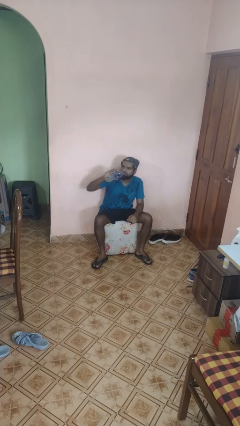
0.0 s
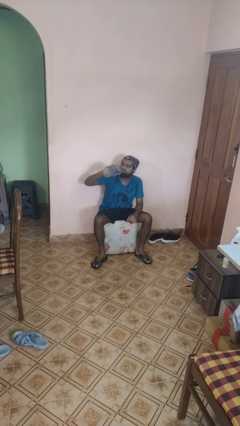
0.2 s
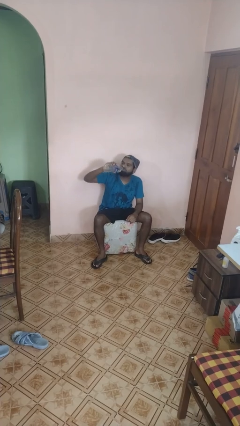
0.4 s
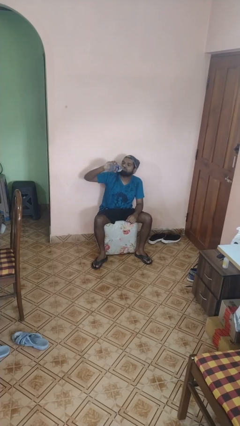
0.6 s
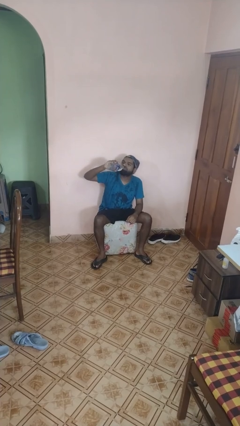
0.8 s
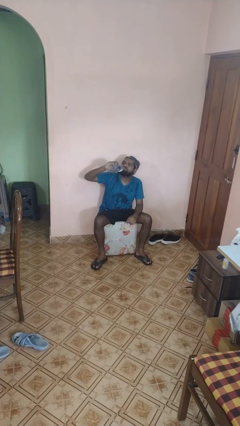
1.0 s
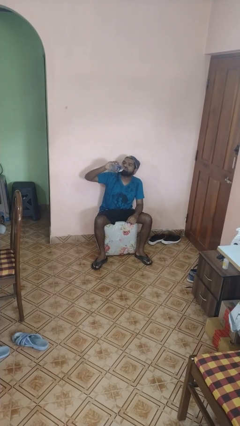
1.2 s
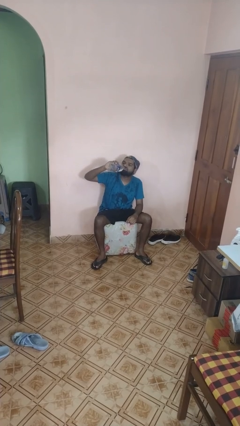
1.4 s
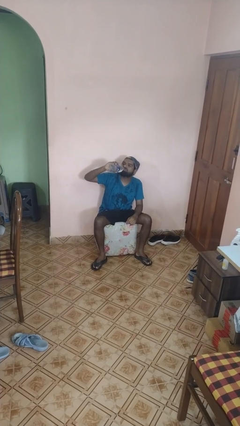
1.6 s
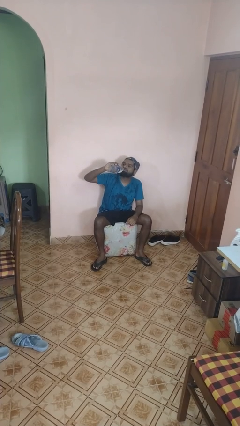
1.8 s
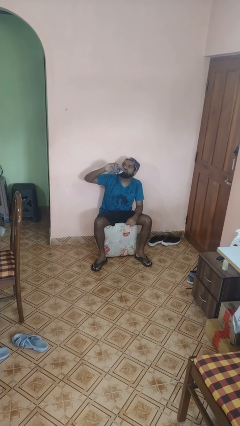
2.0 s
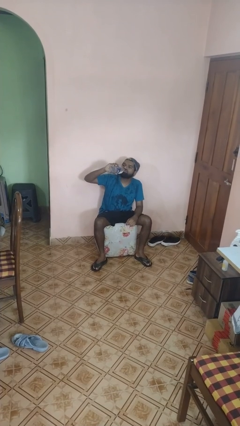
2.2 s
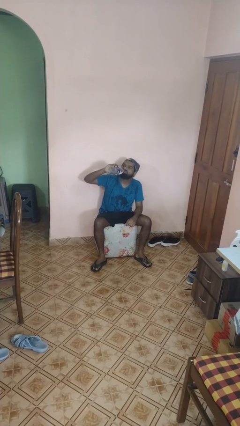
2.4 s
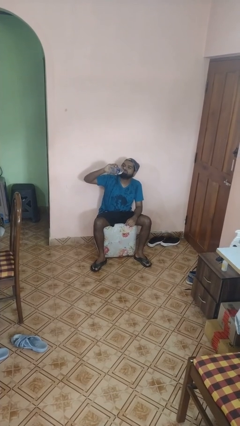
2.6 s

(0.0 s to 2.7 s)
person drinks from bottle

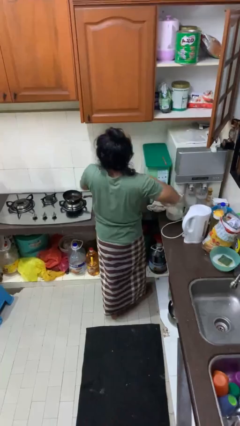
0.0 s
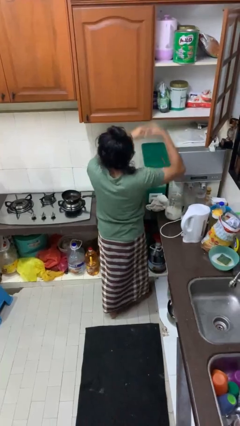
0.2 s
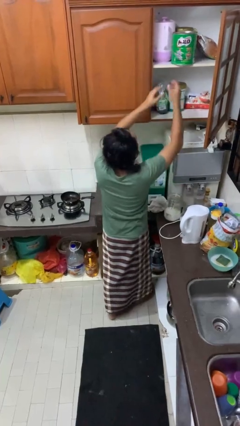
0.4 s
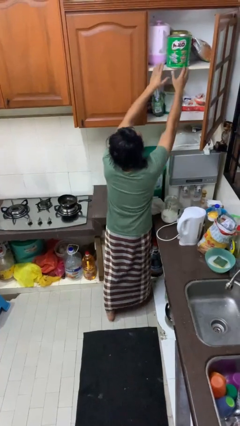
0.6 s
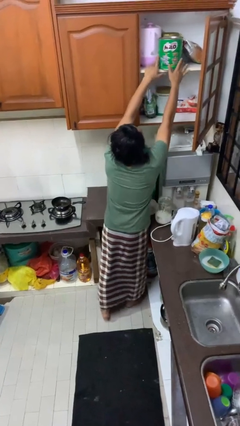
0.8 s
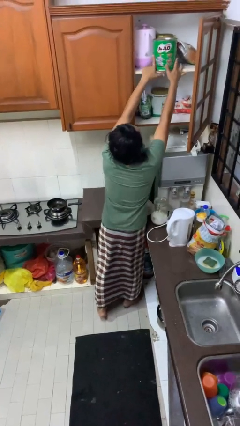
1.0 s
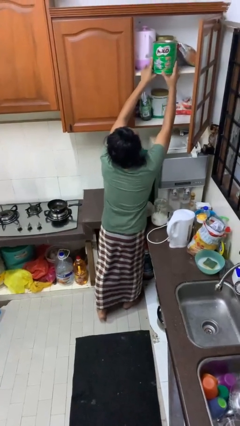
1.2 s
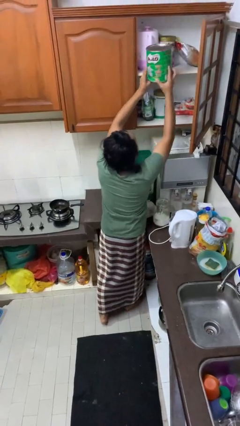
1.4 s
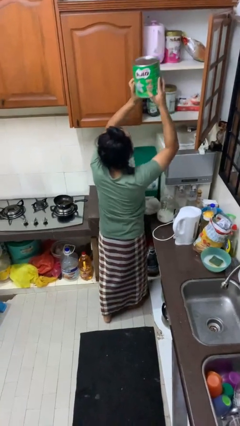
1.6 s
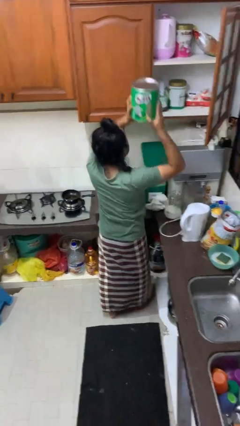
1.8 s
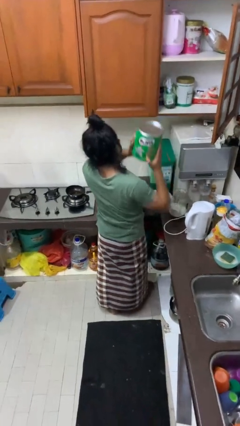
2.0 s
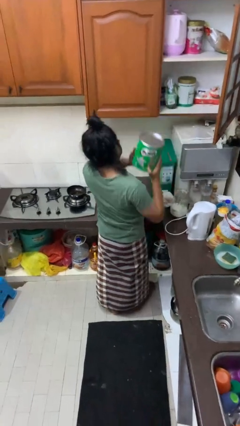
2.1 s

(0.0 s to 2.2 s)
person takes object from cabinet

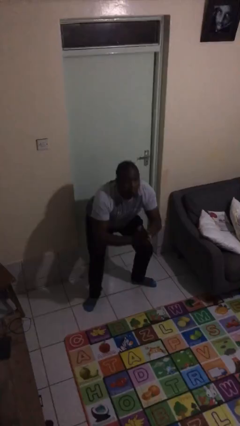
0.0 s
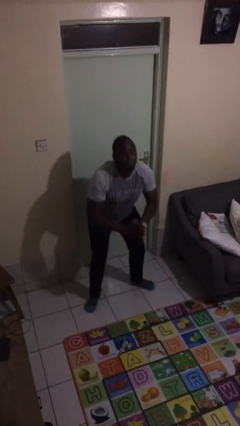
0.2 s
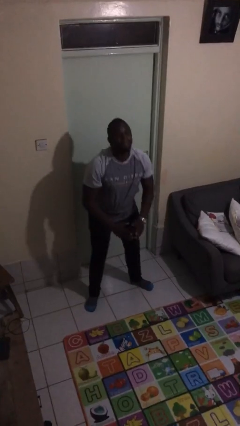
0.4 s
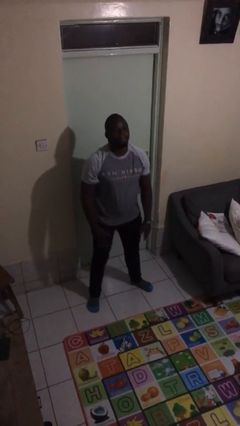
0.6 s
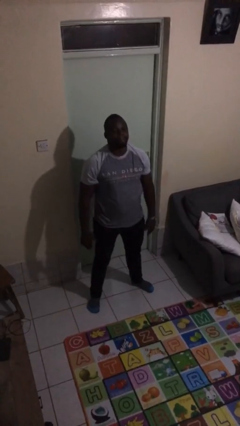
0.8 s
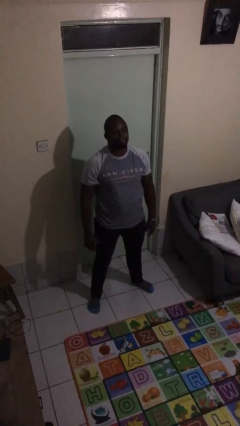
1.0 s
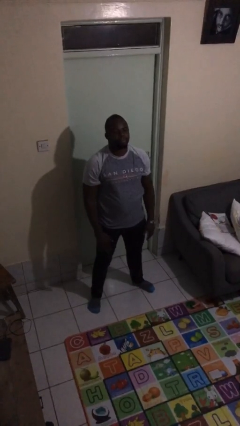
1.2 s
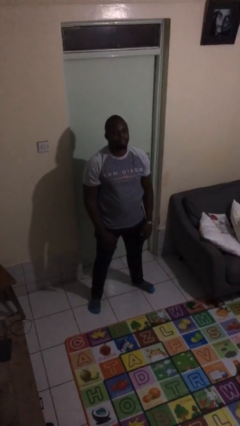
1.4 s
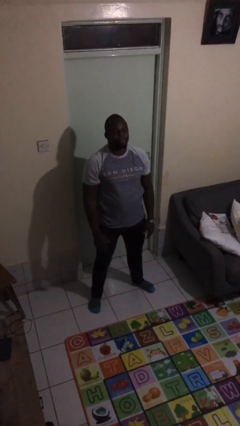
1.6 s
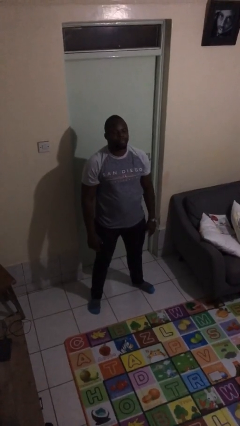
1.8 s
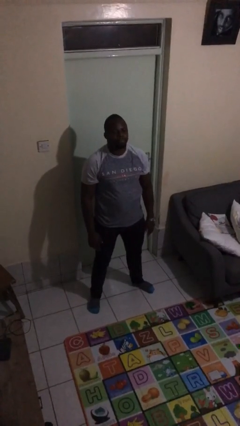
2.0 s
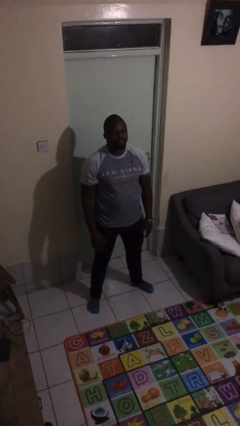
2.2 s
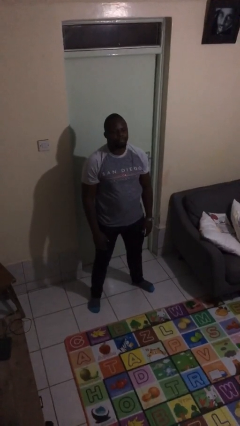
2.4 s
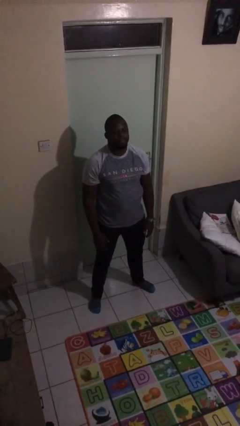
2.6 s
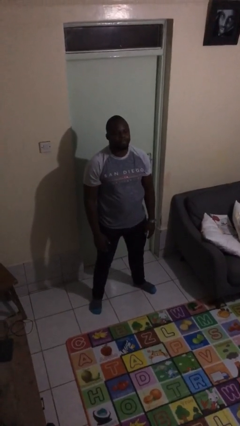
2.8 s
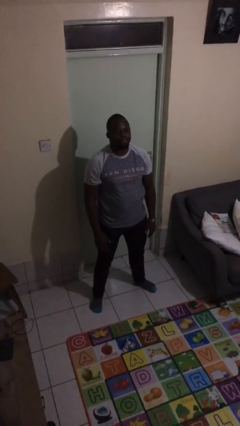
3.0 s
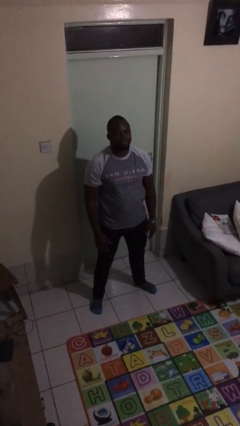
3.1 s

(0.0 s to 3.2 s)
person stands up

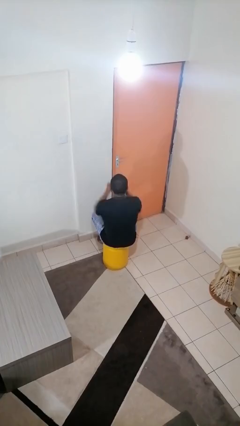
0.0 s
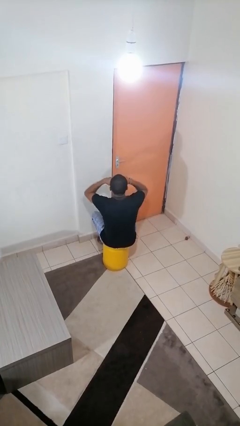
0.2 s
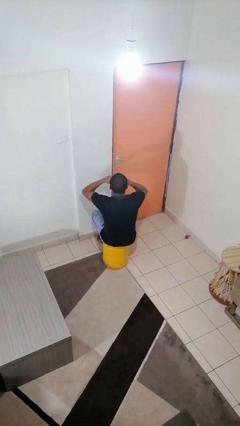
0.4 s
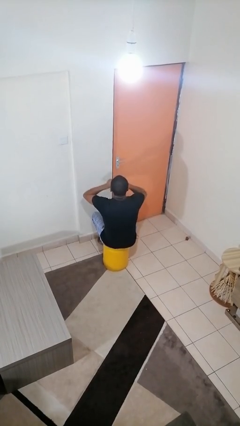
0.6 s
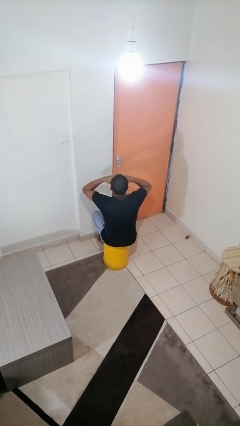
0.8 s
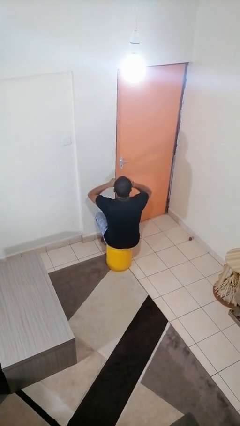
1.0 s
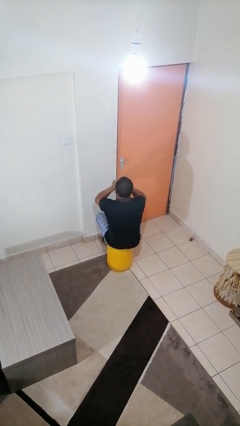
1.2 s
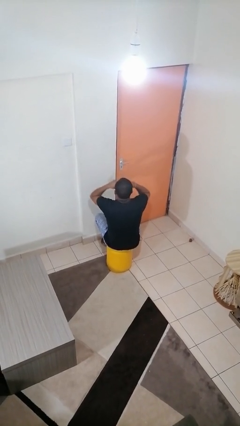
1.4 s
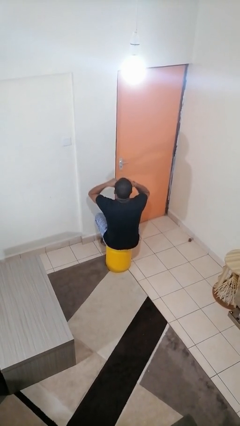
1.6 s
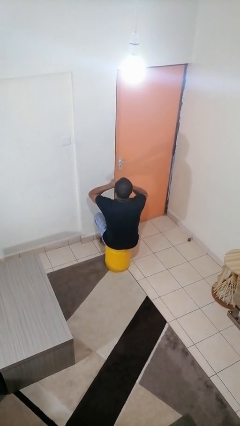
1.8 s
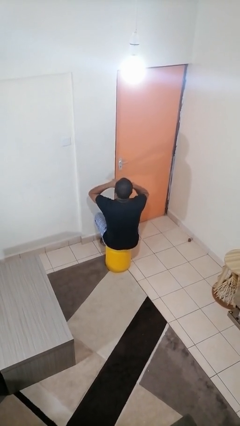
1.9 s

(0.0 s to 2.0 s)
person rubs eyes

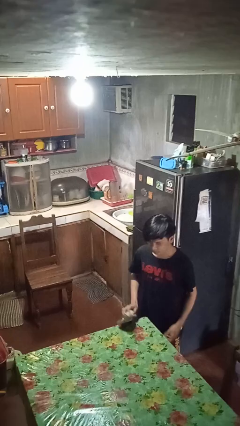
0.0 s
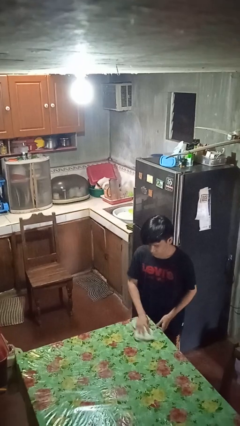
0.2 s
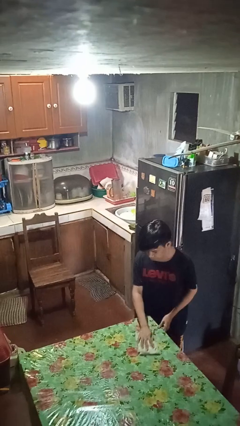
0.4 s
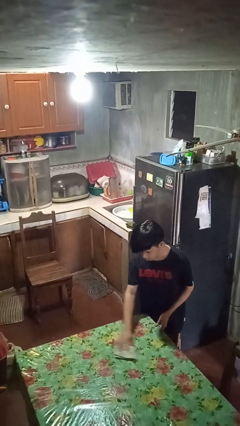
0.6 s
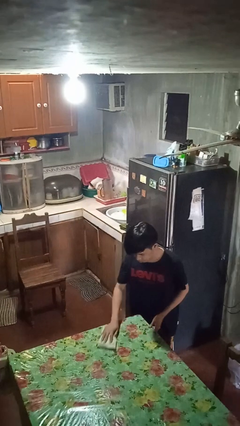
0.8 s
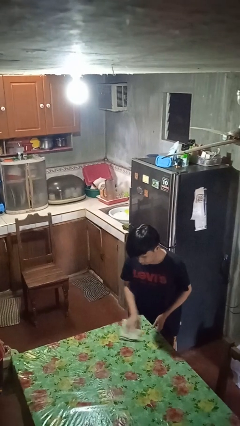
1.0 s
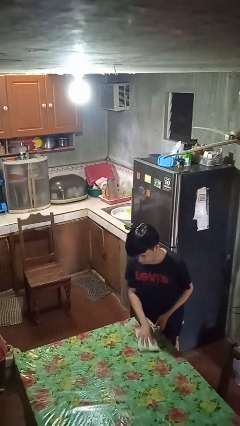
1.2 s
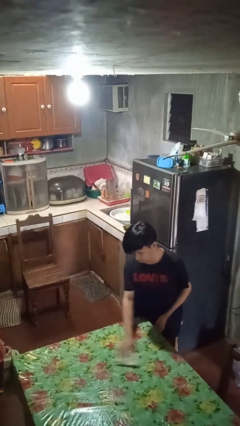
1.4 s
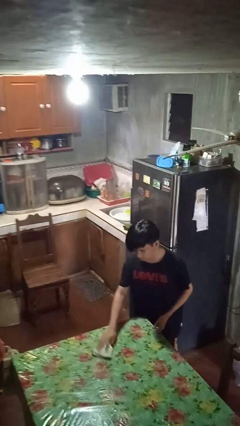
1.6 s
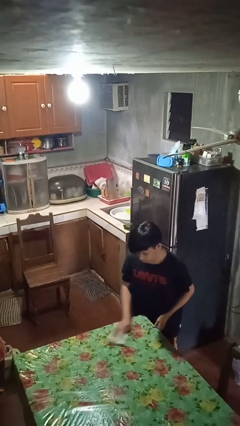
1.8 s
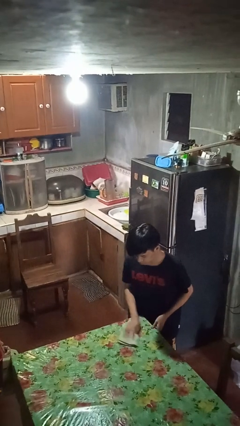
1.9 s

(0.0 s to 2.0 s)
person cleans table with rag

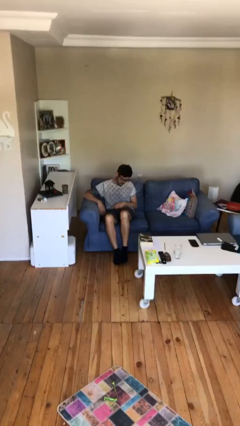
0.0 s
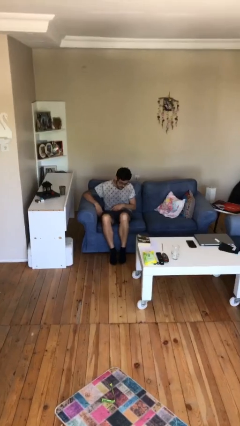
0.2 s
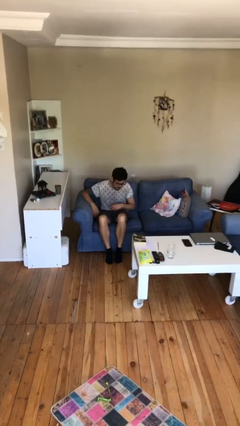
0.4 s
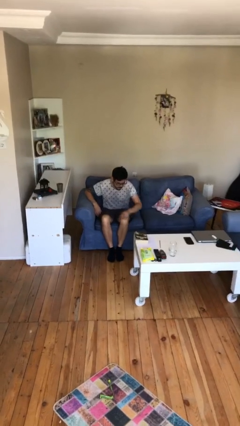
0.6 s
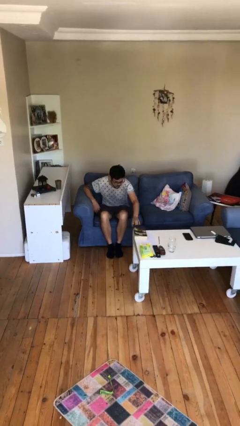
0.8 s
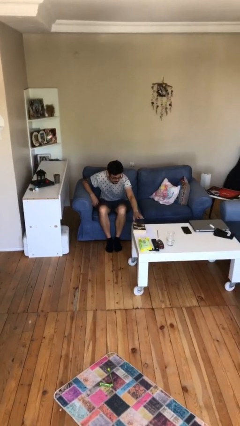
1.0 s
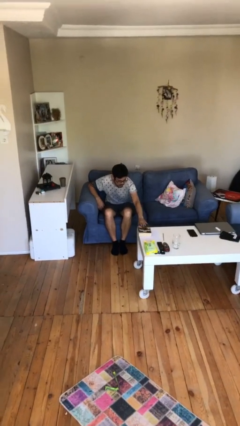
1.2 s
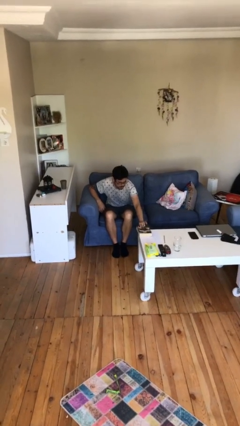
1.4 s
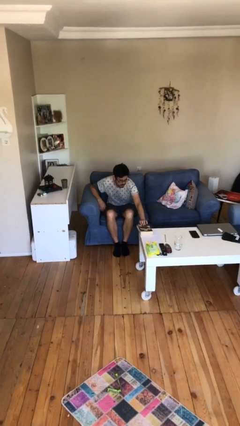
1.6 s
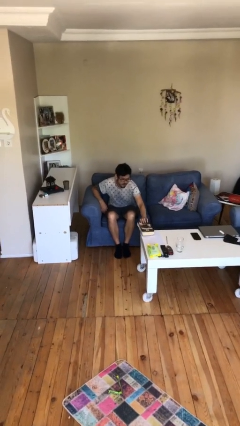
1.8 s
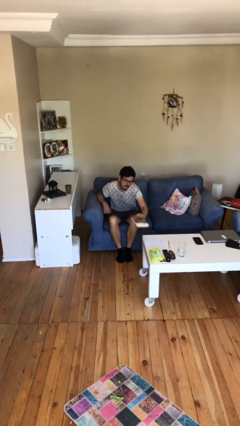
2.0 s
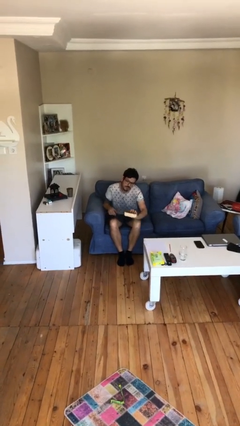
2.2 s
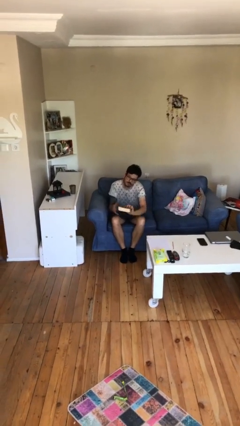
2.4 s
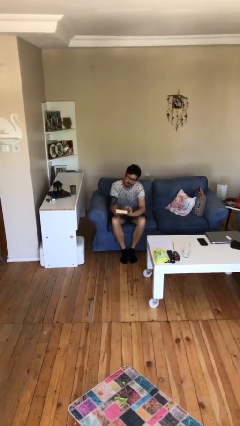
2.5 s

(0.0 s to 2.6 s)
person picks up object from table

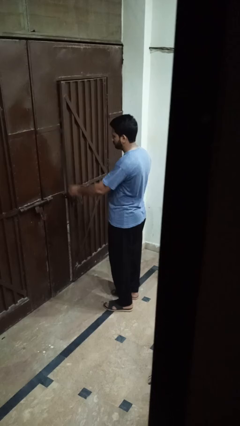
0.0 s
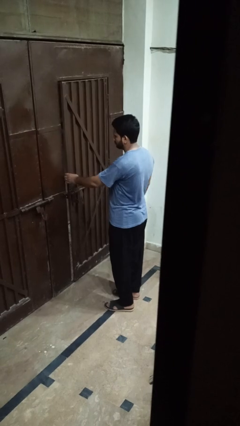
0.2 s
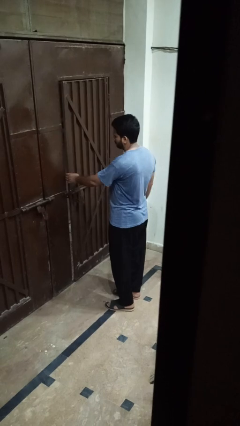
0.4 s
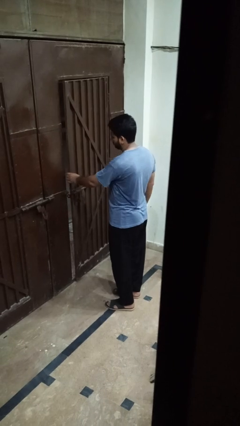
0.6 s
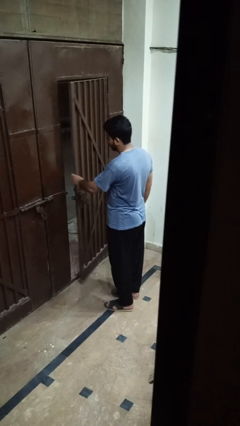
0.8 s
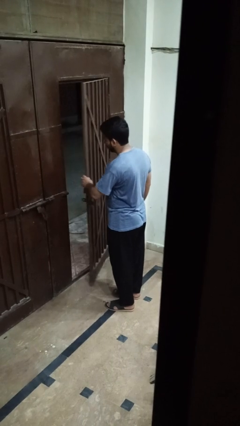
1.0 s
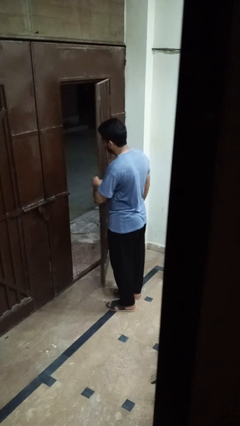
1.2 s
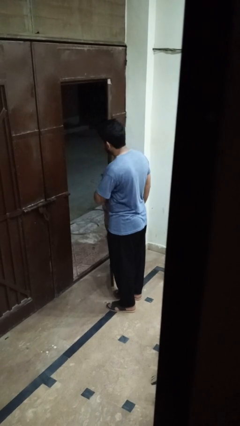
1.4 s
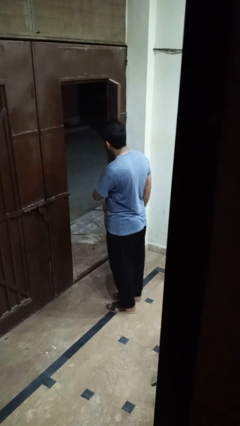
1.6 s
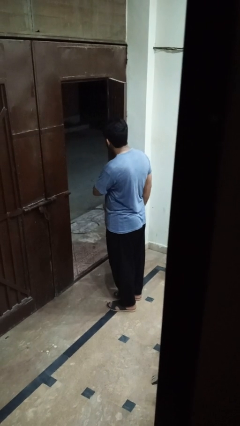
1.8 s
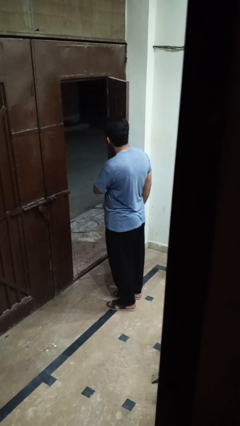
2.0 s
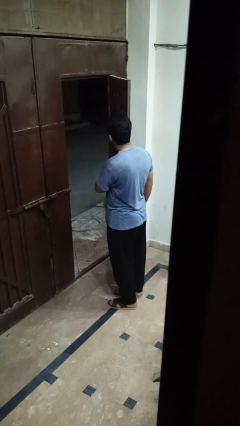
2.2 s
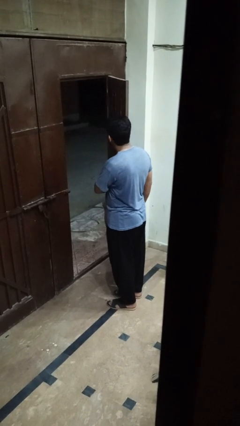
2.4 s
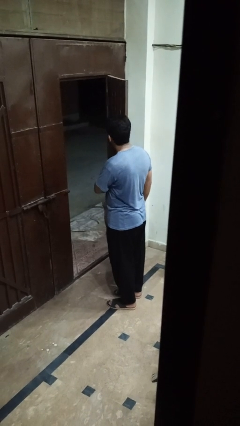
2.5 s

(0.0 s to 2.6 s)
person opens gate
